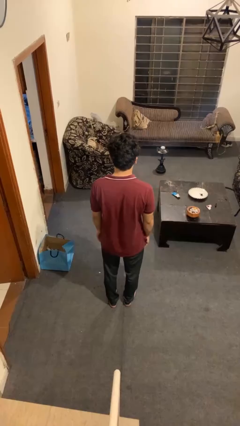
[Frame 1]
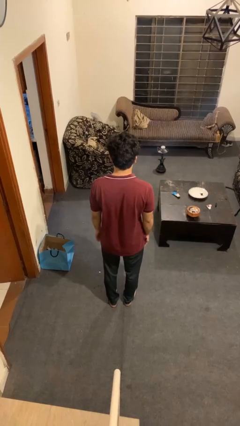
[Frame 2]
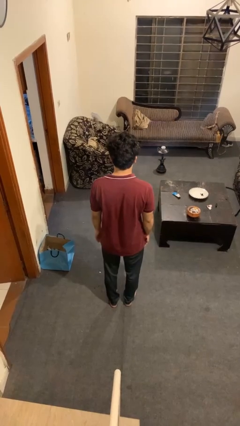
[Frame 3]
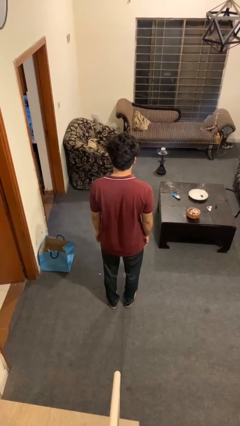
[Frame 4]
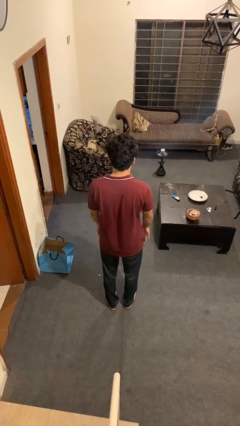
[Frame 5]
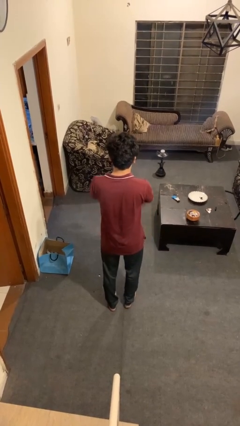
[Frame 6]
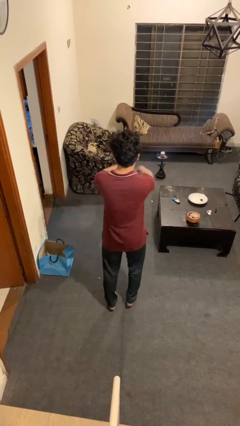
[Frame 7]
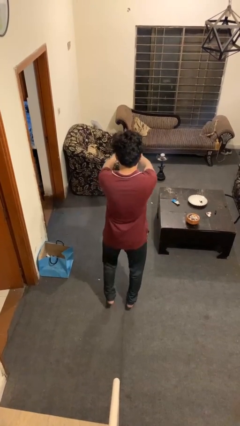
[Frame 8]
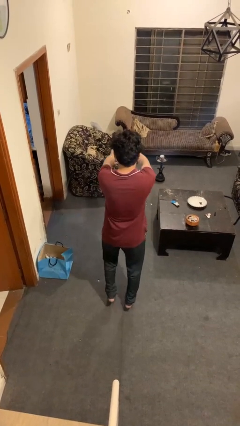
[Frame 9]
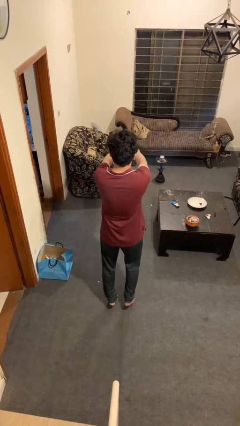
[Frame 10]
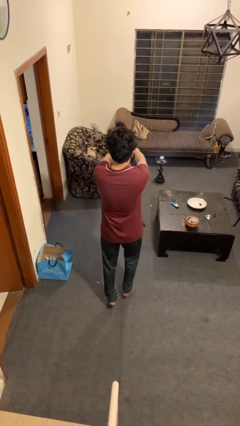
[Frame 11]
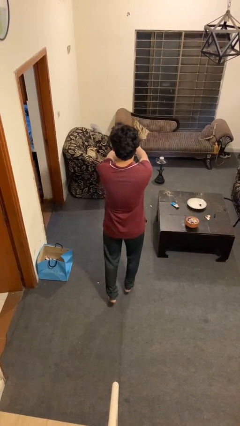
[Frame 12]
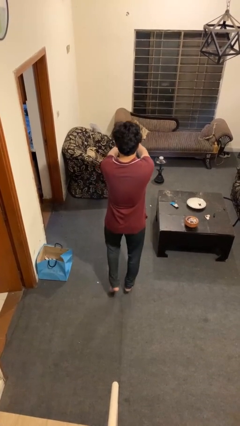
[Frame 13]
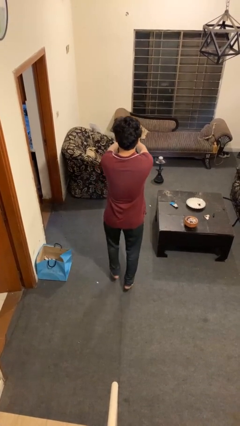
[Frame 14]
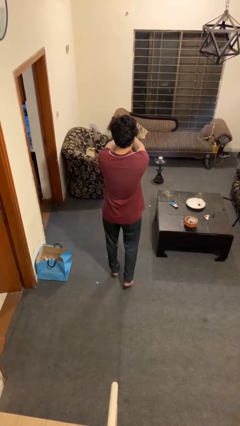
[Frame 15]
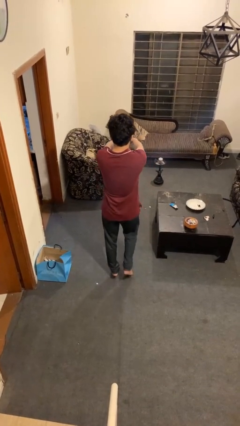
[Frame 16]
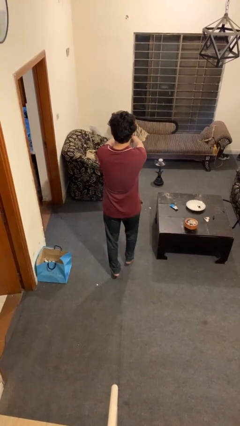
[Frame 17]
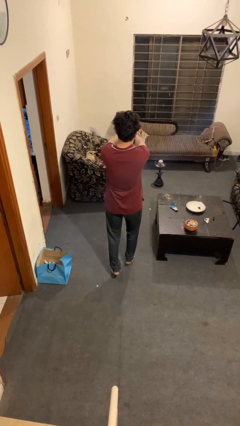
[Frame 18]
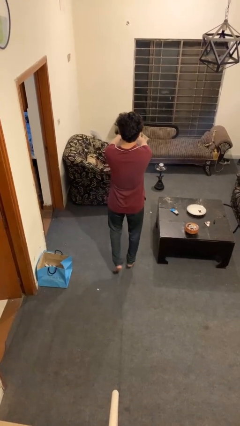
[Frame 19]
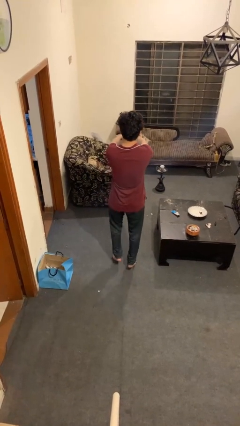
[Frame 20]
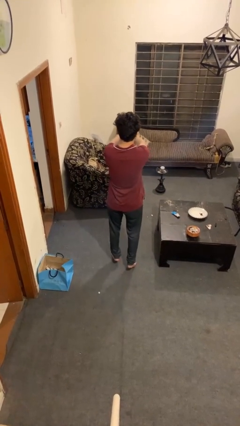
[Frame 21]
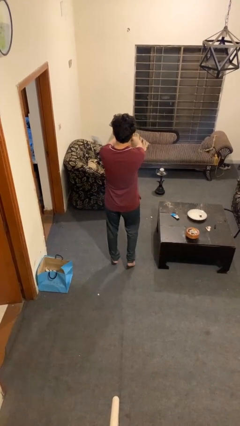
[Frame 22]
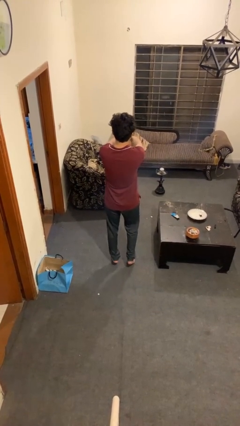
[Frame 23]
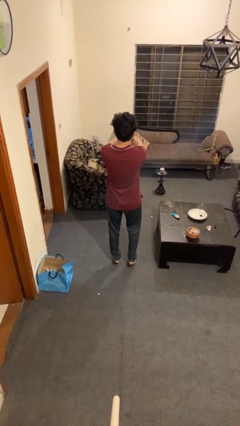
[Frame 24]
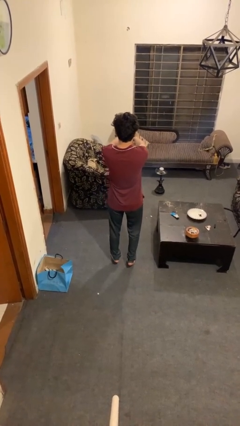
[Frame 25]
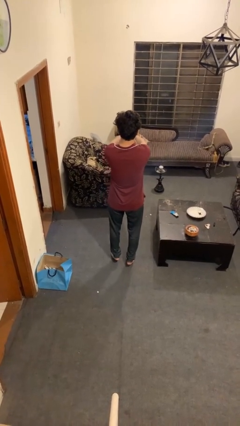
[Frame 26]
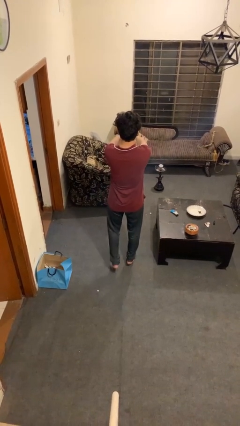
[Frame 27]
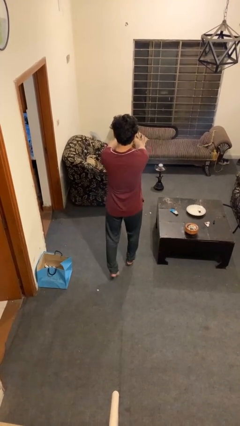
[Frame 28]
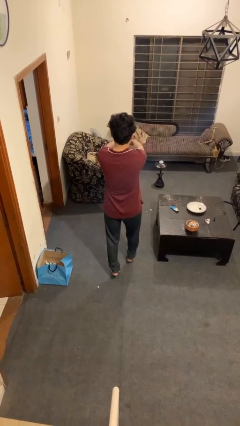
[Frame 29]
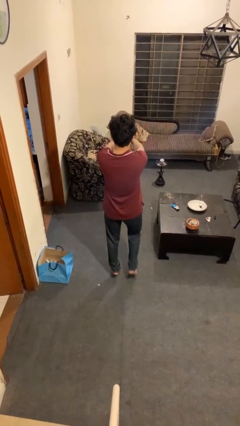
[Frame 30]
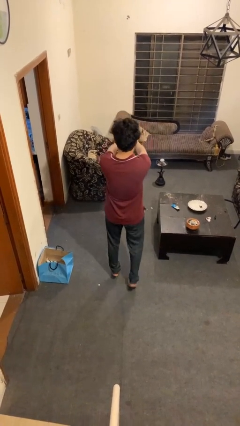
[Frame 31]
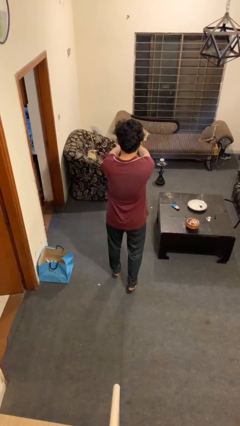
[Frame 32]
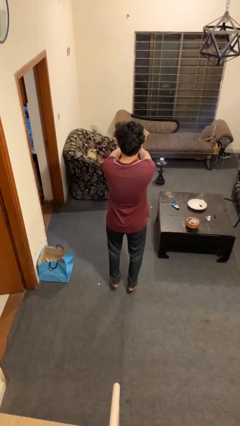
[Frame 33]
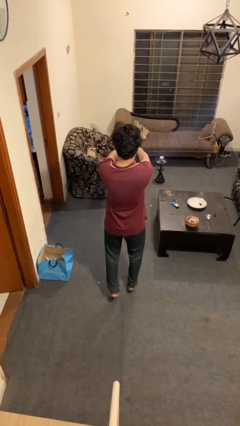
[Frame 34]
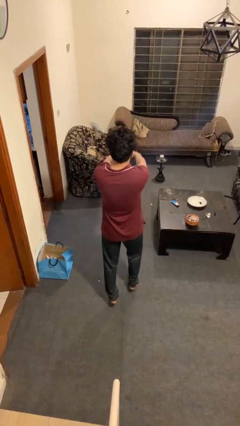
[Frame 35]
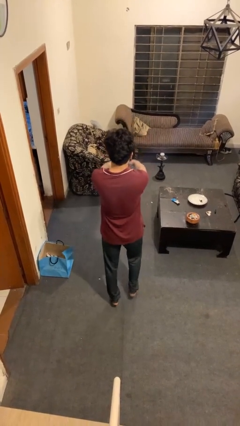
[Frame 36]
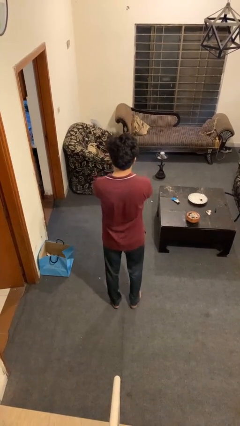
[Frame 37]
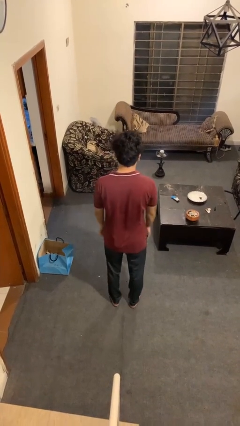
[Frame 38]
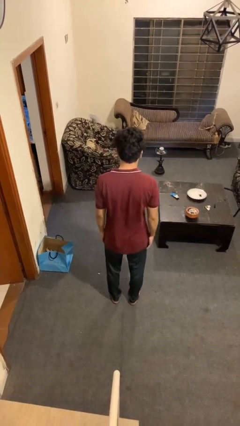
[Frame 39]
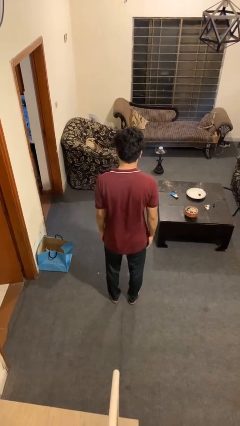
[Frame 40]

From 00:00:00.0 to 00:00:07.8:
person walks tiptoe

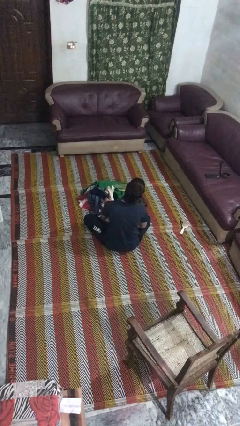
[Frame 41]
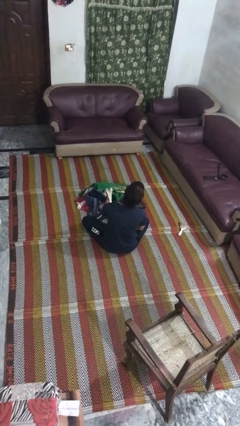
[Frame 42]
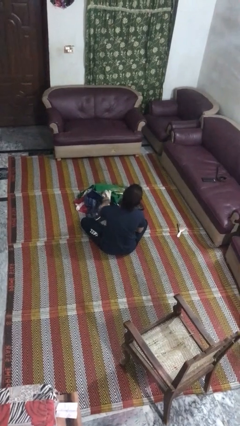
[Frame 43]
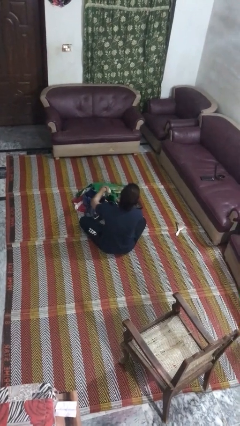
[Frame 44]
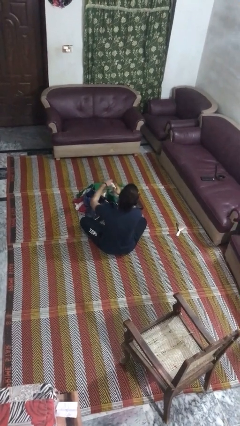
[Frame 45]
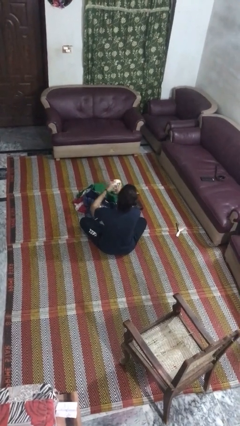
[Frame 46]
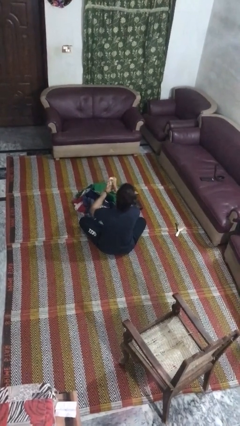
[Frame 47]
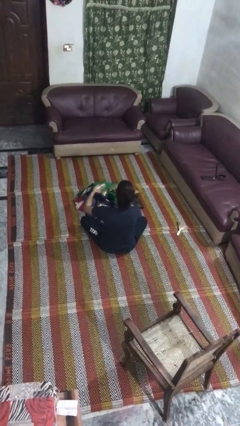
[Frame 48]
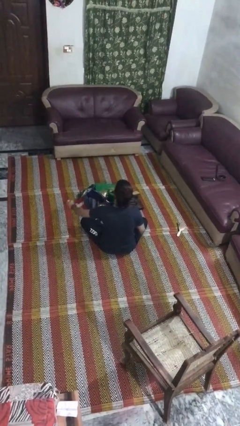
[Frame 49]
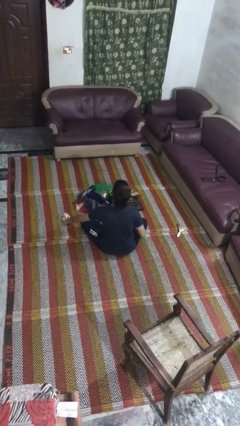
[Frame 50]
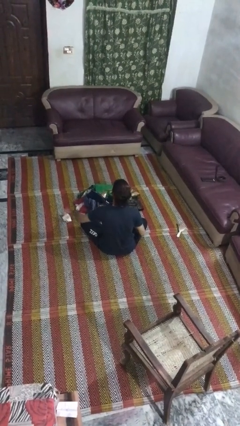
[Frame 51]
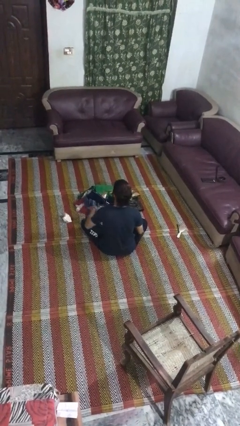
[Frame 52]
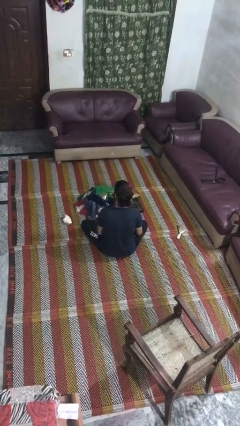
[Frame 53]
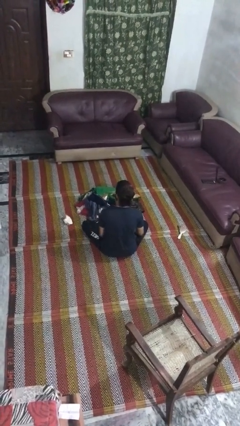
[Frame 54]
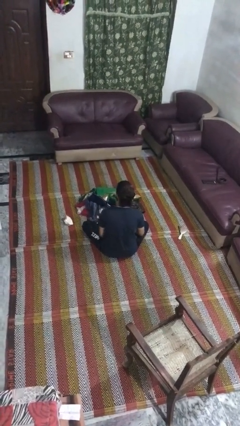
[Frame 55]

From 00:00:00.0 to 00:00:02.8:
person folds socks

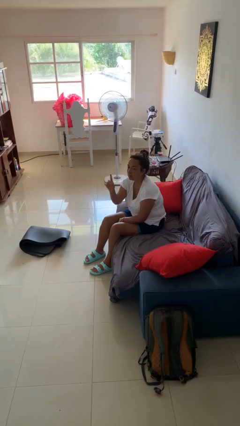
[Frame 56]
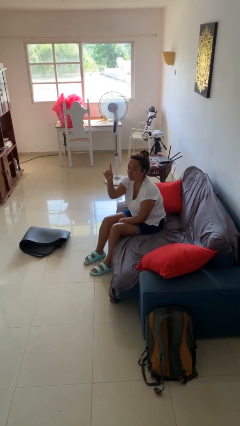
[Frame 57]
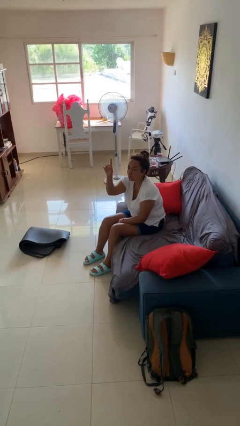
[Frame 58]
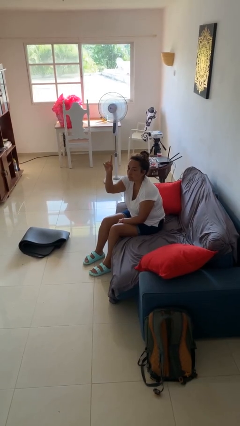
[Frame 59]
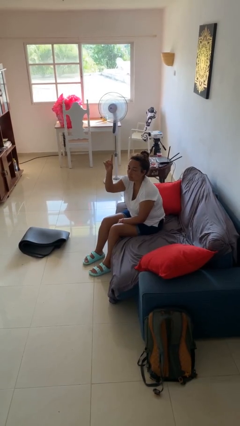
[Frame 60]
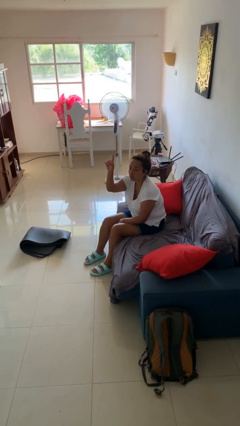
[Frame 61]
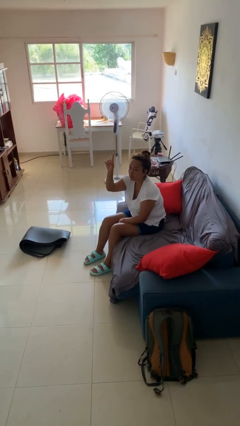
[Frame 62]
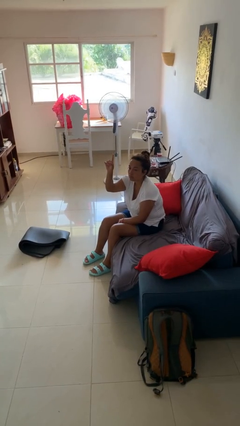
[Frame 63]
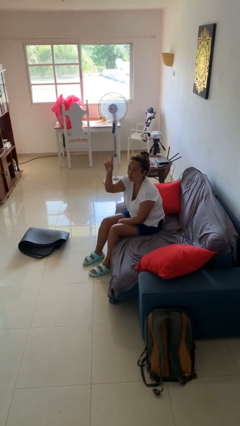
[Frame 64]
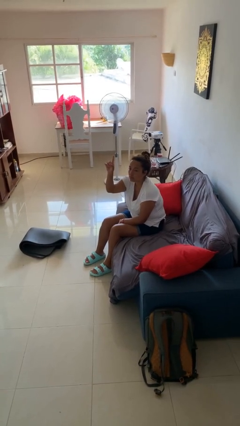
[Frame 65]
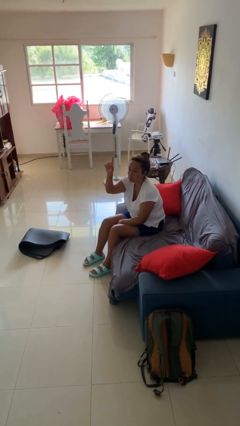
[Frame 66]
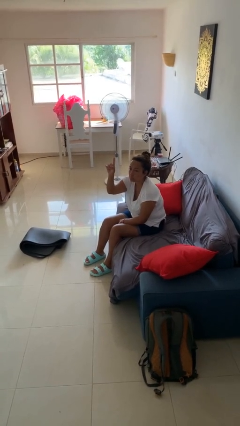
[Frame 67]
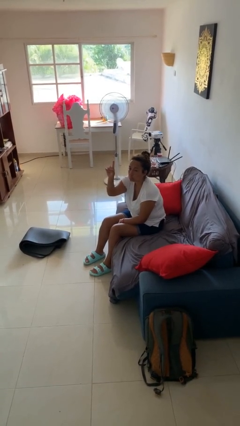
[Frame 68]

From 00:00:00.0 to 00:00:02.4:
person gestures raise hand

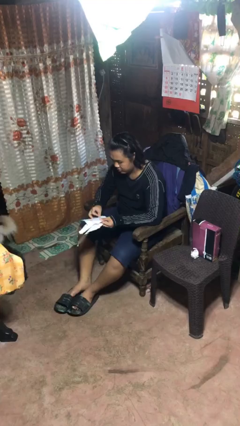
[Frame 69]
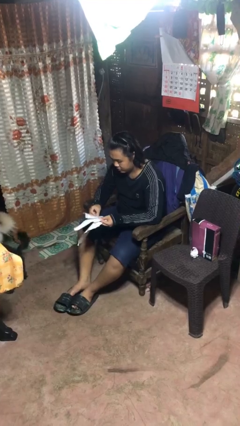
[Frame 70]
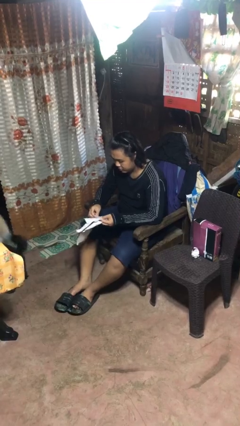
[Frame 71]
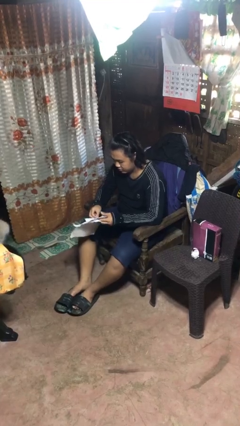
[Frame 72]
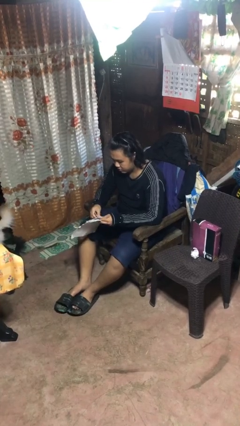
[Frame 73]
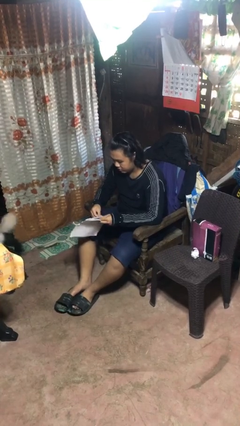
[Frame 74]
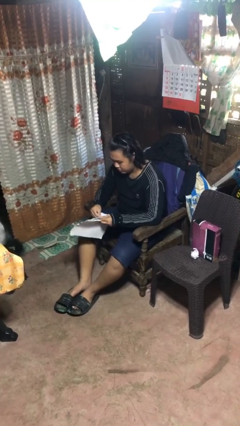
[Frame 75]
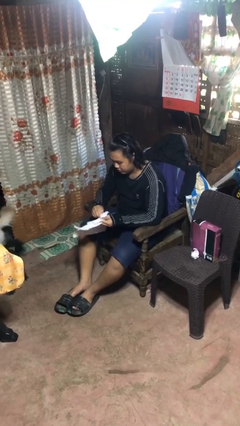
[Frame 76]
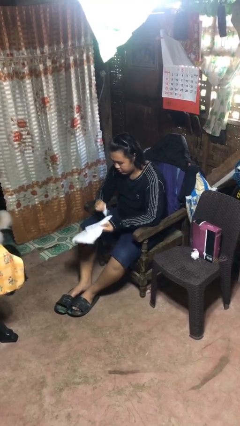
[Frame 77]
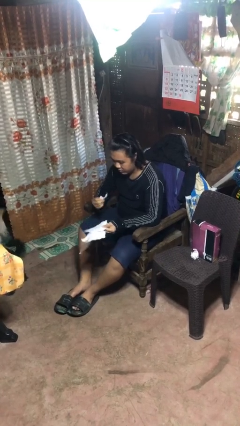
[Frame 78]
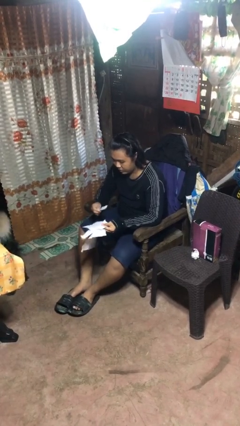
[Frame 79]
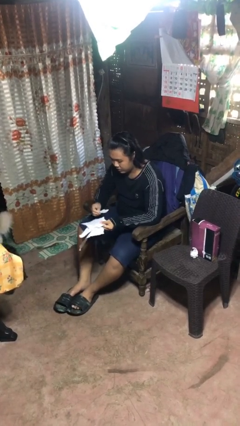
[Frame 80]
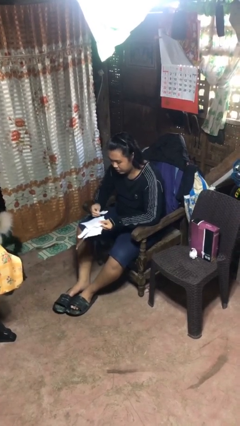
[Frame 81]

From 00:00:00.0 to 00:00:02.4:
person tears paper

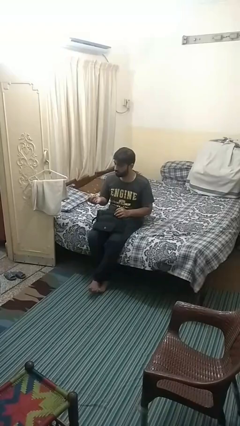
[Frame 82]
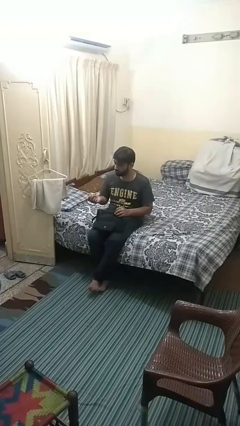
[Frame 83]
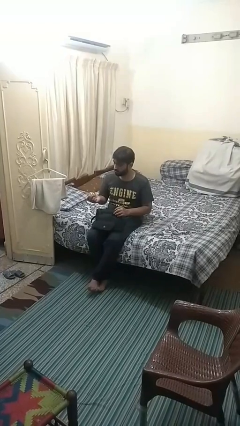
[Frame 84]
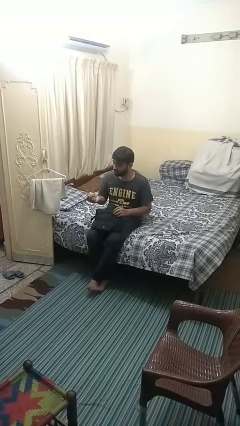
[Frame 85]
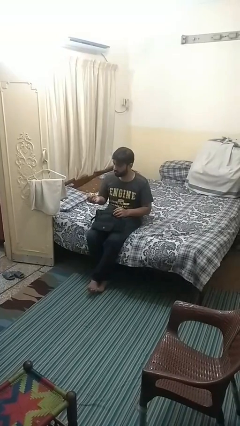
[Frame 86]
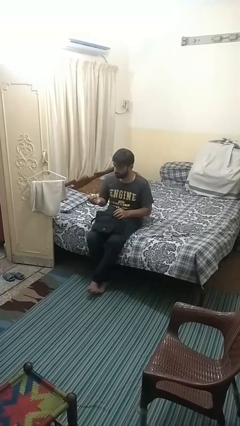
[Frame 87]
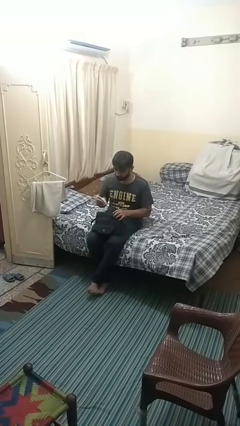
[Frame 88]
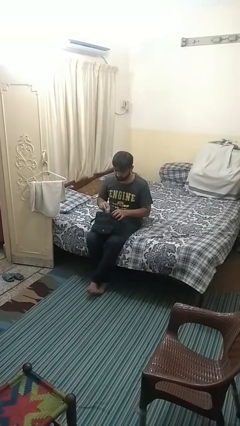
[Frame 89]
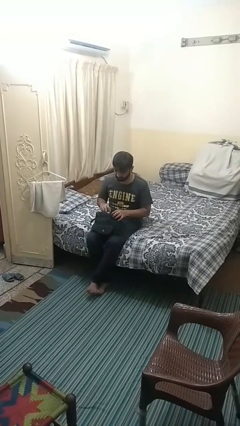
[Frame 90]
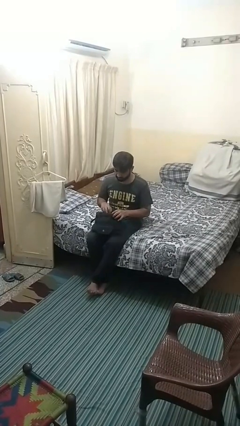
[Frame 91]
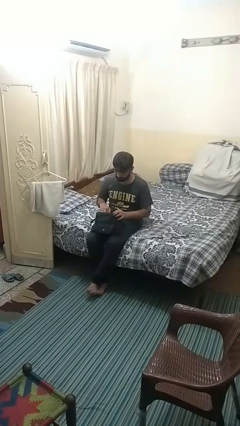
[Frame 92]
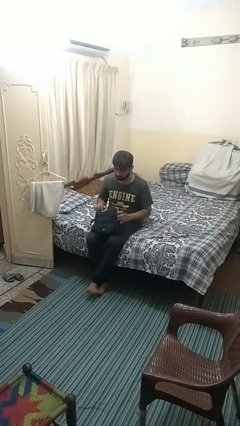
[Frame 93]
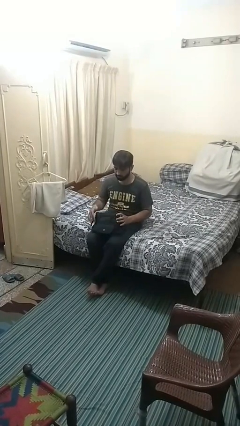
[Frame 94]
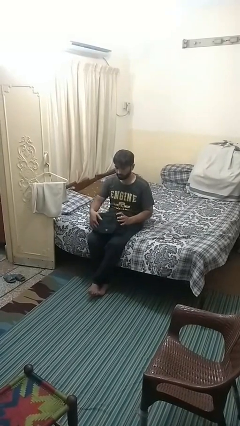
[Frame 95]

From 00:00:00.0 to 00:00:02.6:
person puts object into purse
